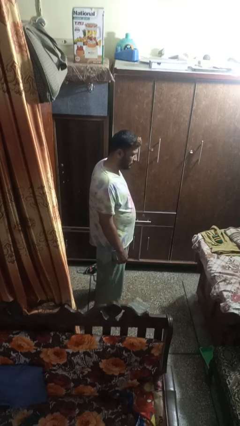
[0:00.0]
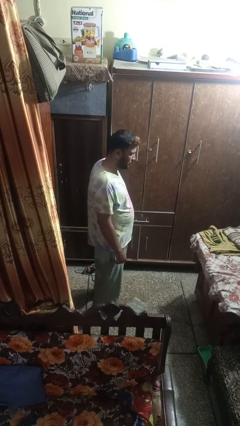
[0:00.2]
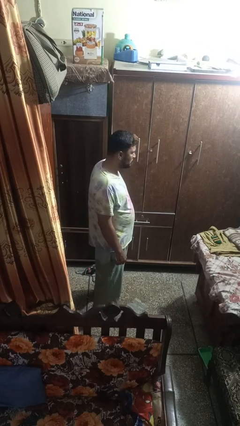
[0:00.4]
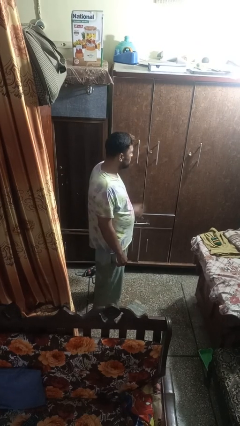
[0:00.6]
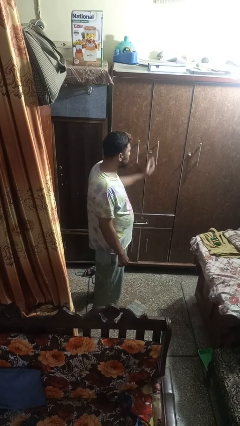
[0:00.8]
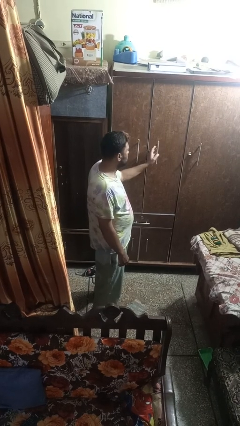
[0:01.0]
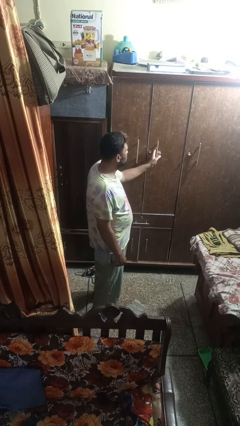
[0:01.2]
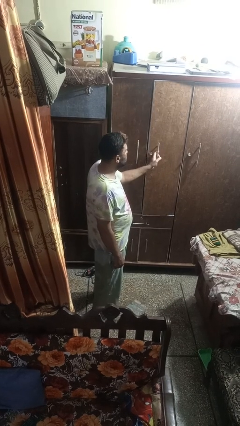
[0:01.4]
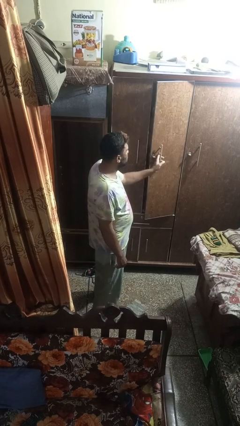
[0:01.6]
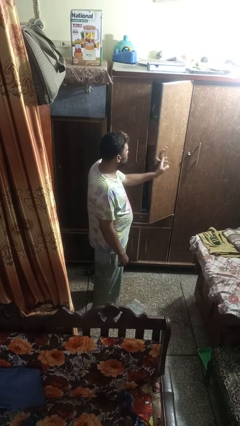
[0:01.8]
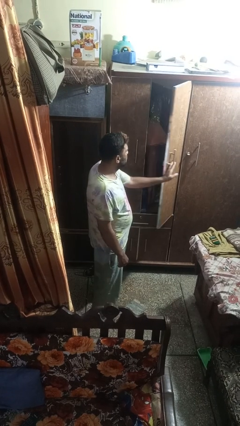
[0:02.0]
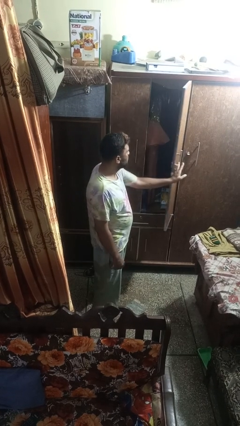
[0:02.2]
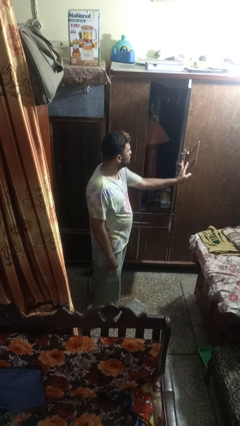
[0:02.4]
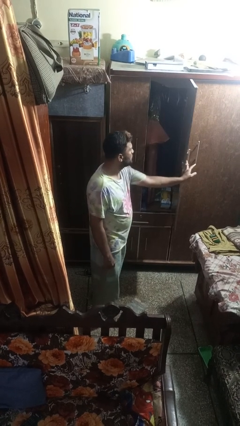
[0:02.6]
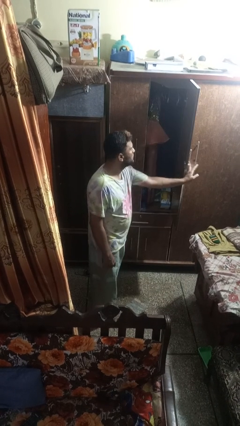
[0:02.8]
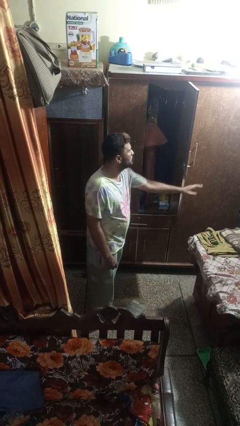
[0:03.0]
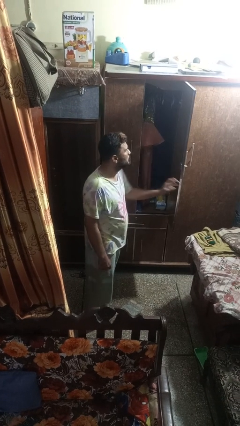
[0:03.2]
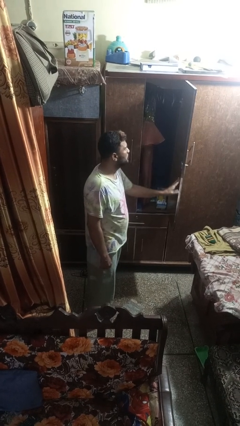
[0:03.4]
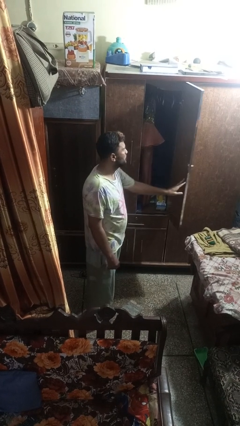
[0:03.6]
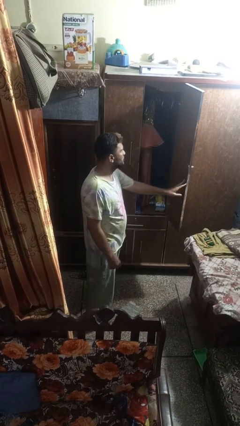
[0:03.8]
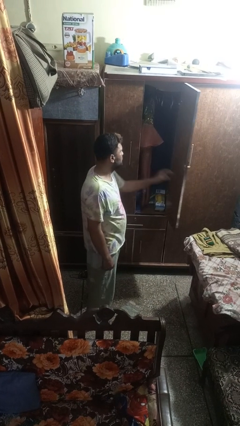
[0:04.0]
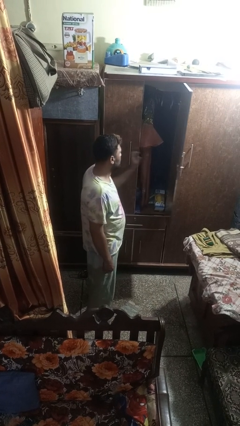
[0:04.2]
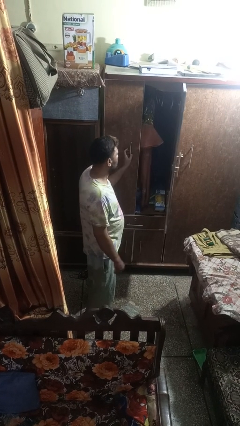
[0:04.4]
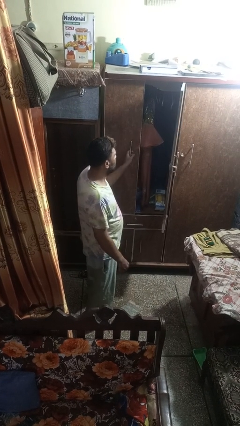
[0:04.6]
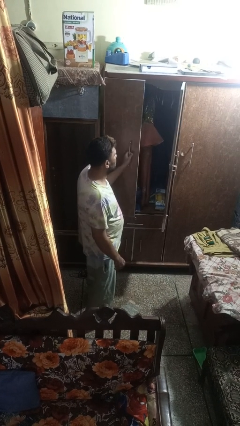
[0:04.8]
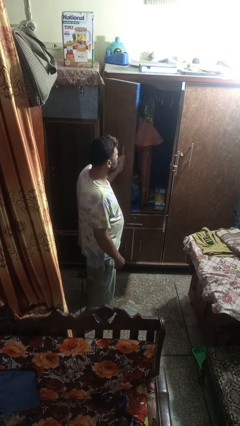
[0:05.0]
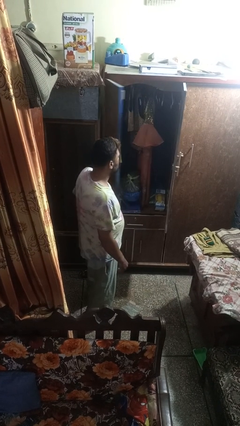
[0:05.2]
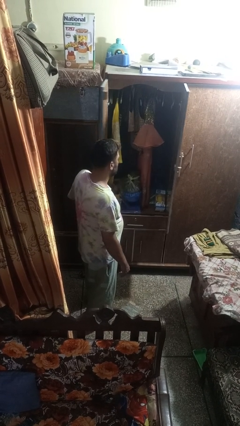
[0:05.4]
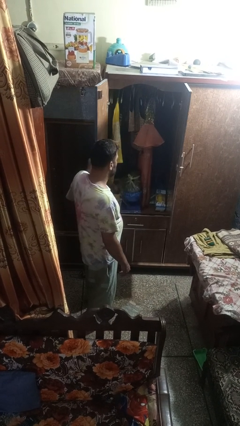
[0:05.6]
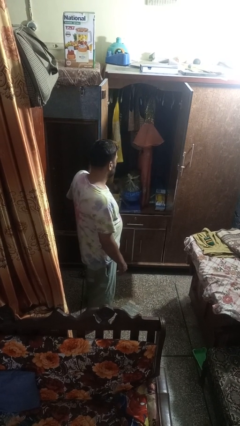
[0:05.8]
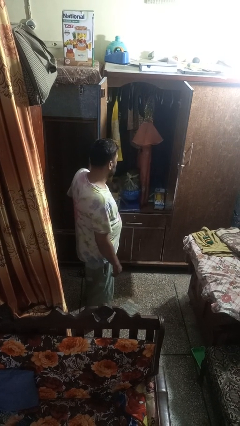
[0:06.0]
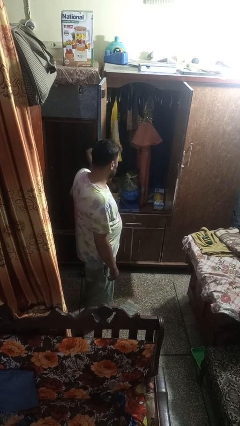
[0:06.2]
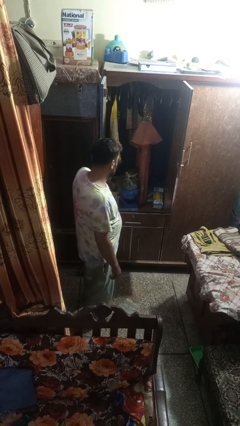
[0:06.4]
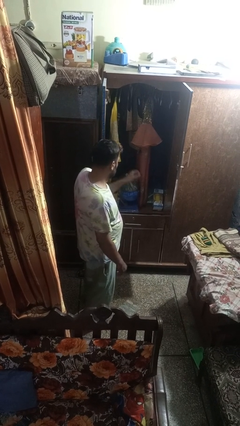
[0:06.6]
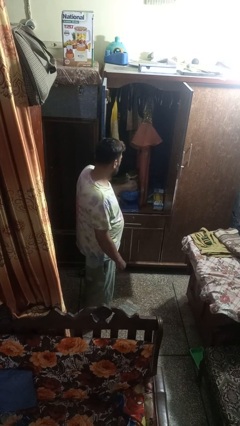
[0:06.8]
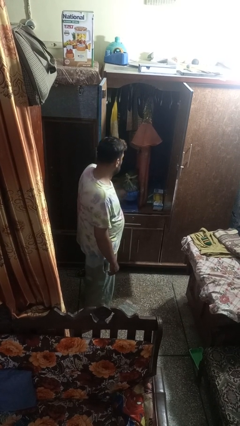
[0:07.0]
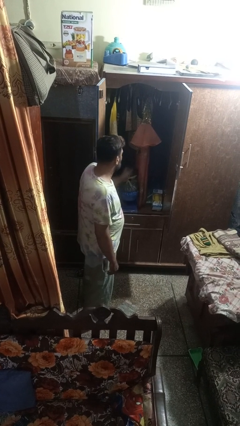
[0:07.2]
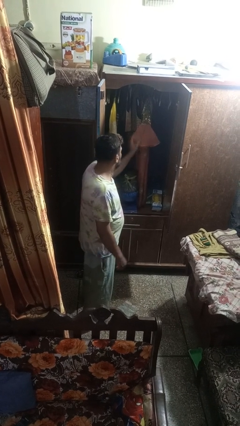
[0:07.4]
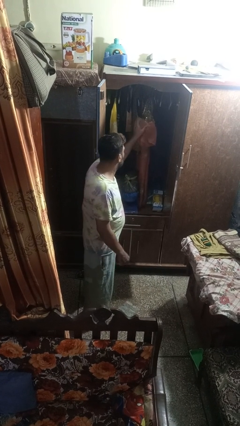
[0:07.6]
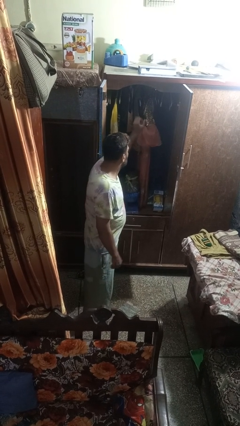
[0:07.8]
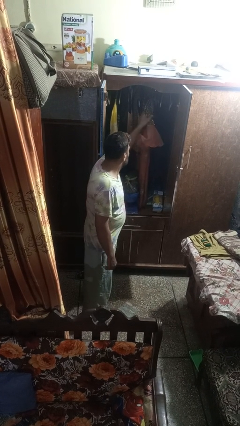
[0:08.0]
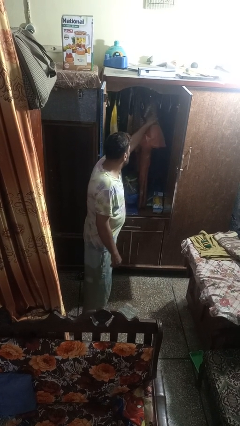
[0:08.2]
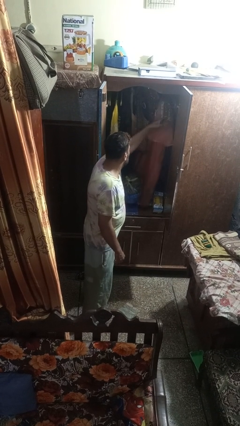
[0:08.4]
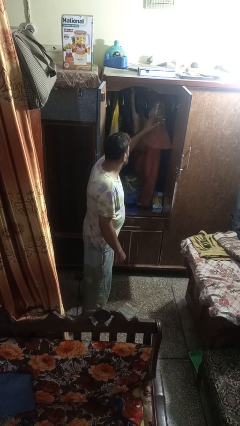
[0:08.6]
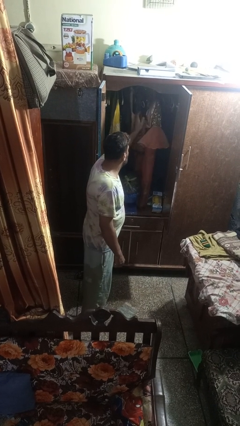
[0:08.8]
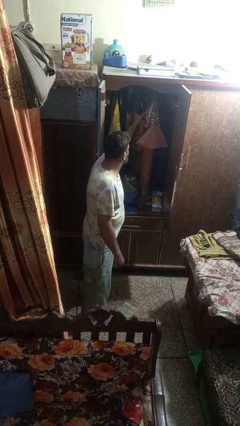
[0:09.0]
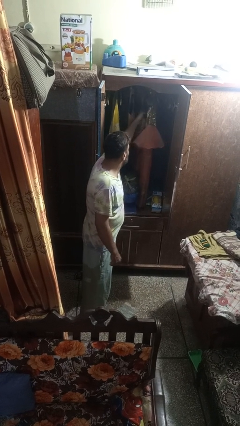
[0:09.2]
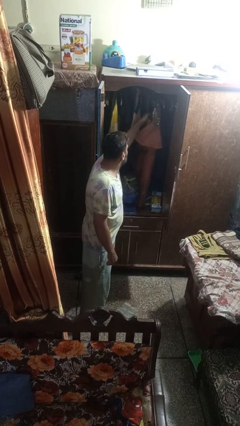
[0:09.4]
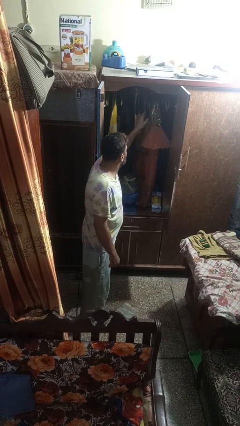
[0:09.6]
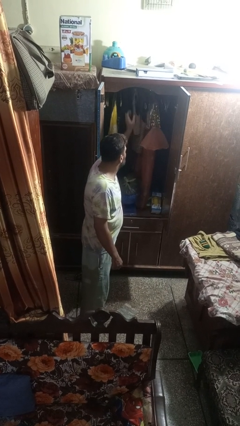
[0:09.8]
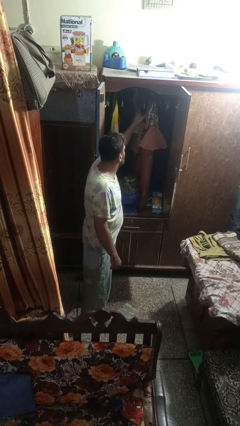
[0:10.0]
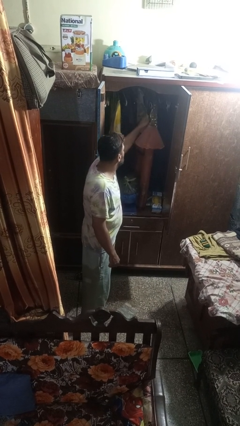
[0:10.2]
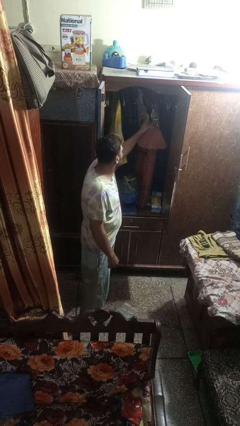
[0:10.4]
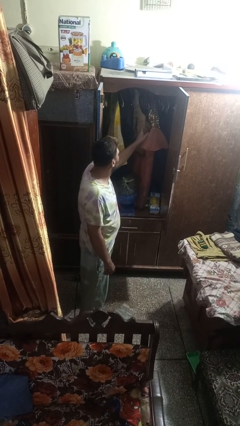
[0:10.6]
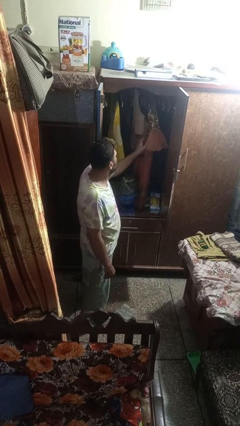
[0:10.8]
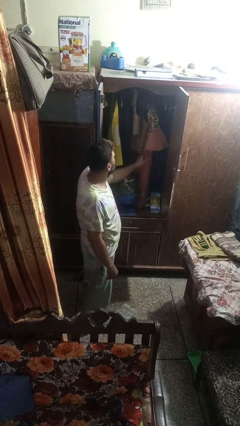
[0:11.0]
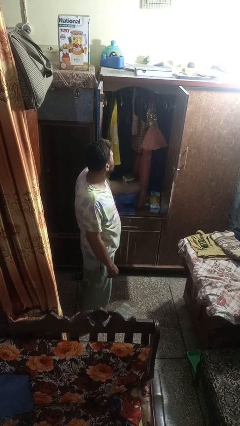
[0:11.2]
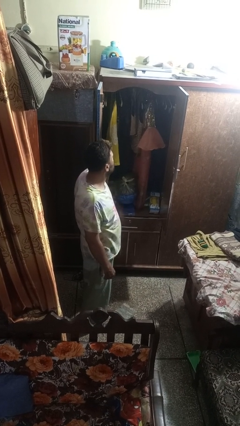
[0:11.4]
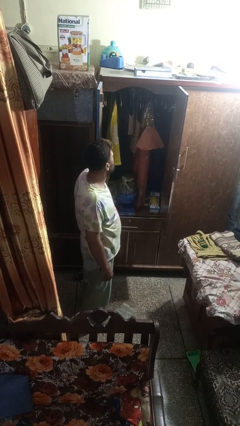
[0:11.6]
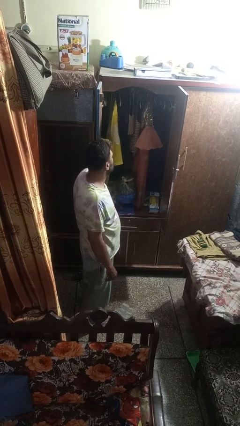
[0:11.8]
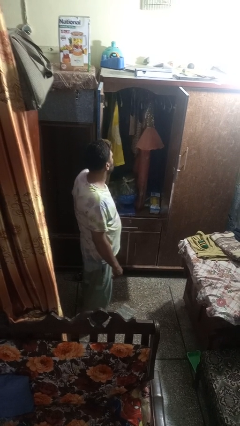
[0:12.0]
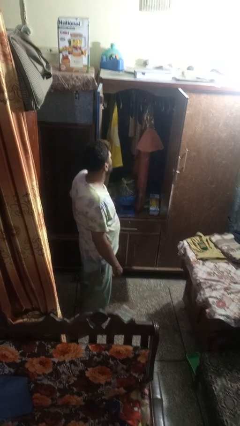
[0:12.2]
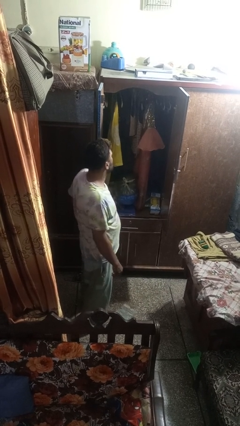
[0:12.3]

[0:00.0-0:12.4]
person opens closet door

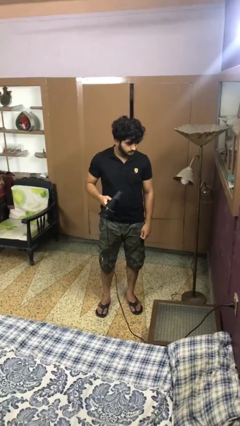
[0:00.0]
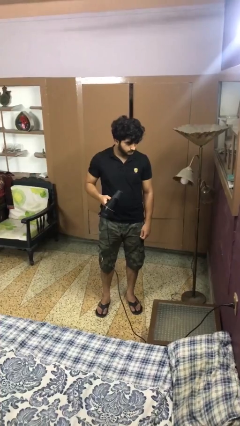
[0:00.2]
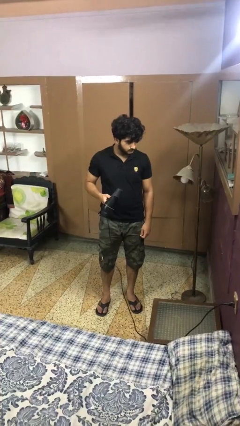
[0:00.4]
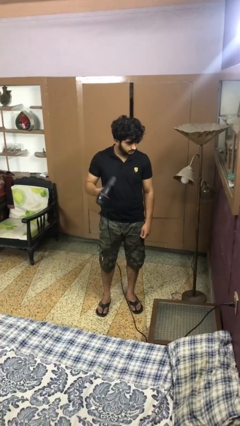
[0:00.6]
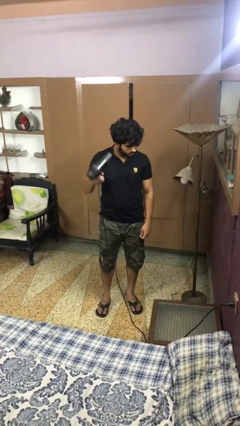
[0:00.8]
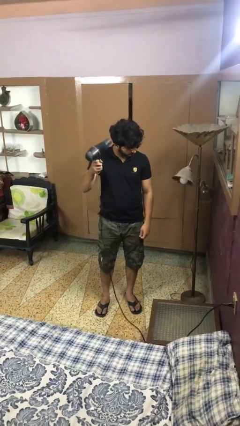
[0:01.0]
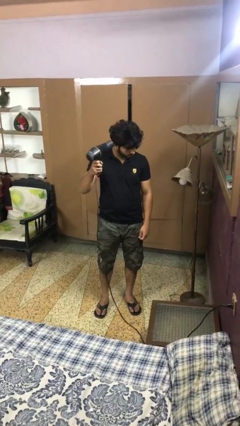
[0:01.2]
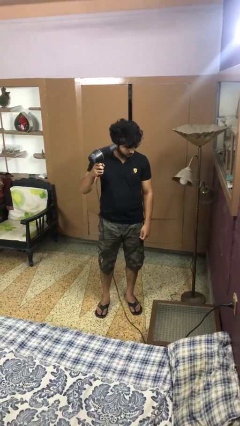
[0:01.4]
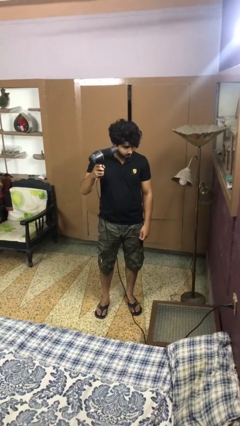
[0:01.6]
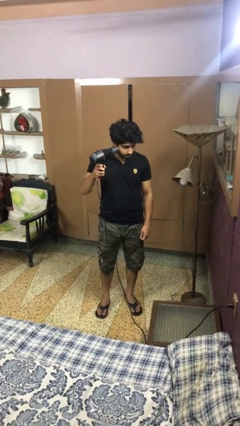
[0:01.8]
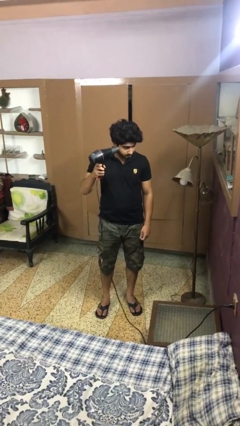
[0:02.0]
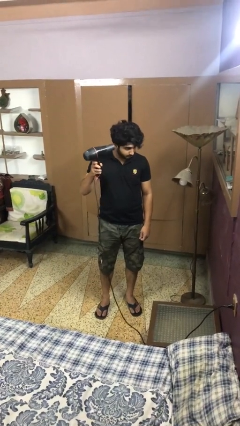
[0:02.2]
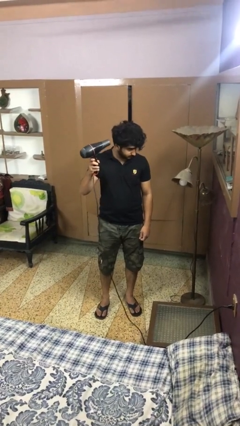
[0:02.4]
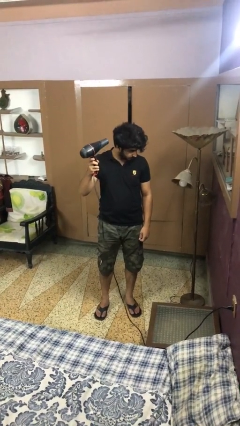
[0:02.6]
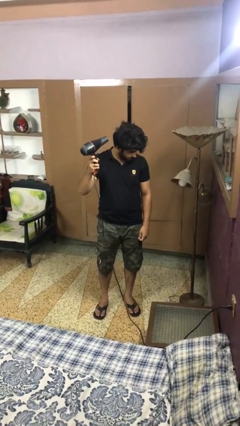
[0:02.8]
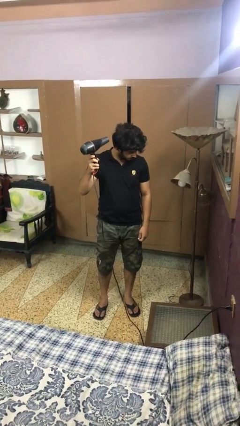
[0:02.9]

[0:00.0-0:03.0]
person dries hair with hairdryer

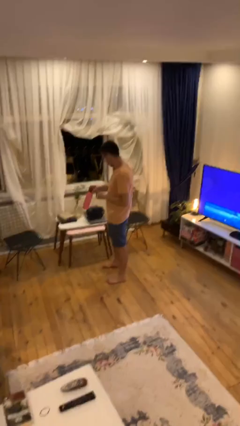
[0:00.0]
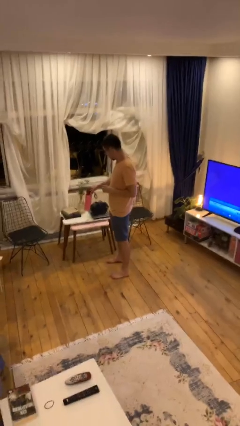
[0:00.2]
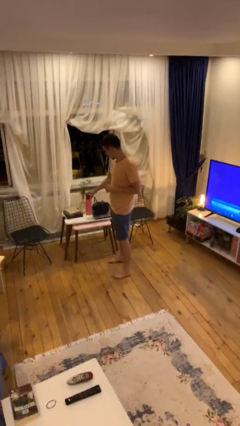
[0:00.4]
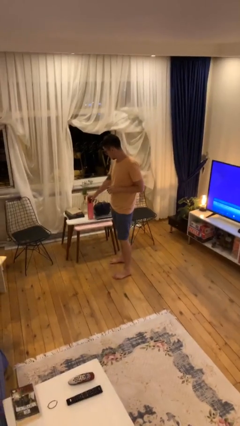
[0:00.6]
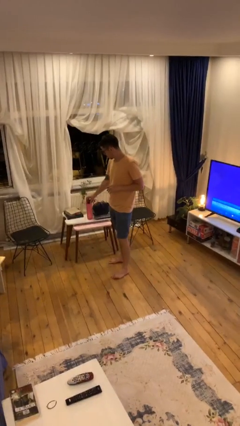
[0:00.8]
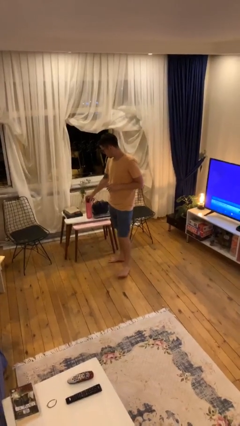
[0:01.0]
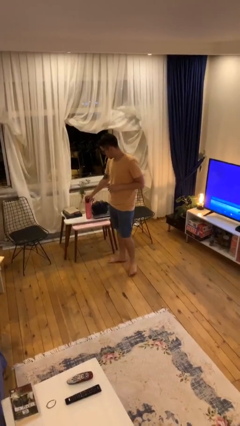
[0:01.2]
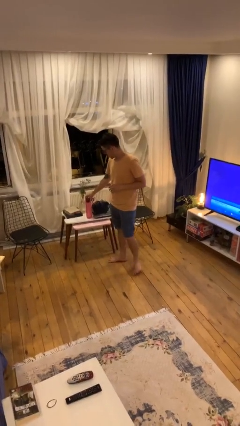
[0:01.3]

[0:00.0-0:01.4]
person puts down object on table

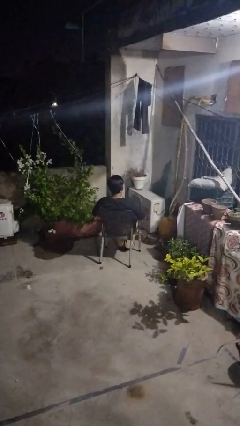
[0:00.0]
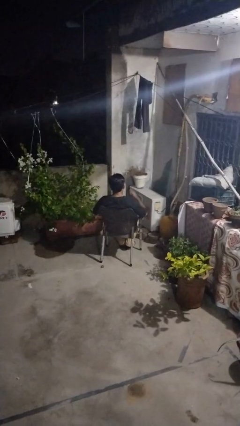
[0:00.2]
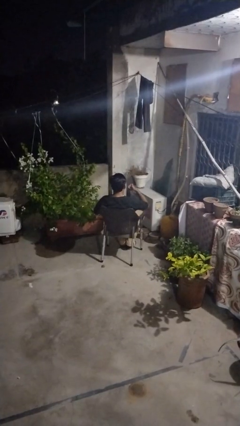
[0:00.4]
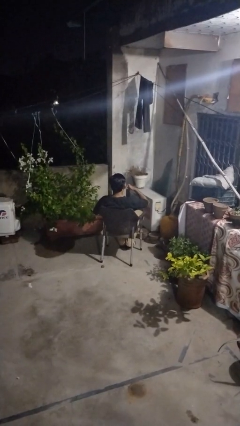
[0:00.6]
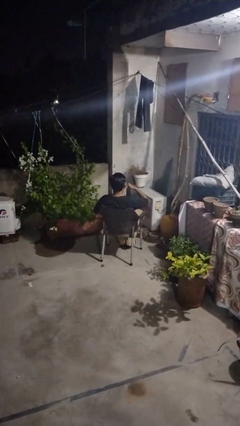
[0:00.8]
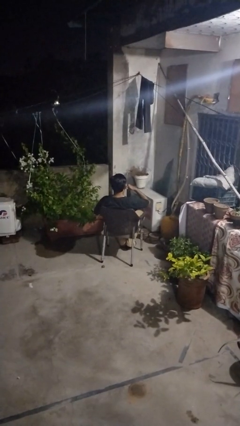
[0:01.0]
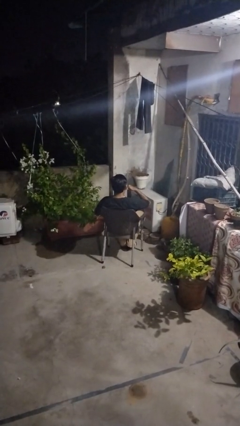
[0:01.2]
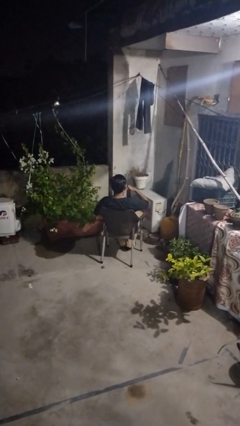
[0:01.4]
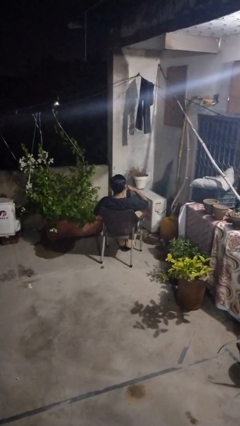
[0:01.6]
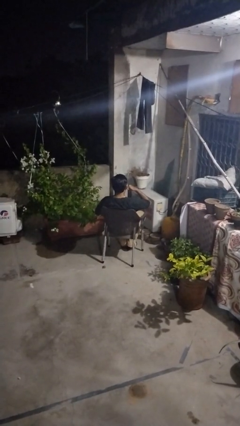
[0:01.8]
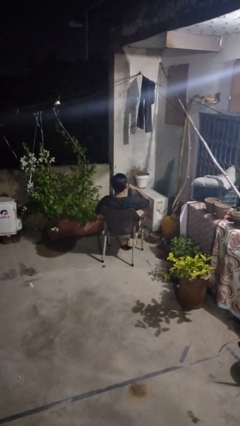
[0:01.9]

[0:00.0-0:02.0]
person gestures call me
